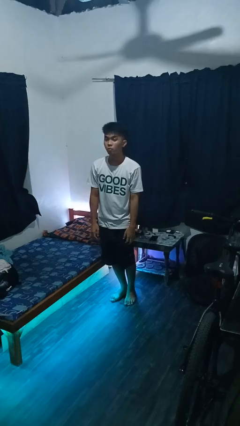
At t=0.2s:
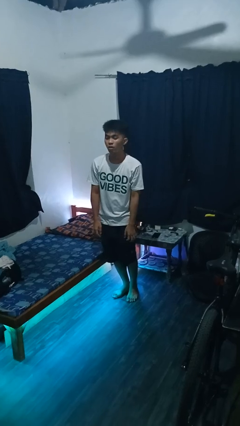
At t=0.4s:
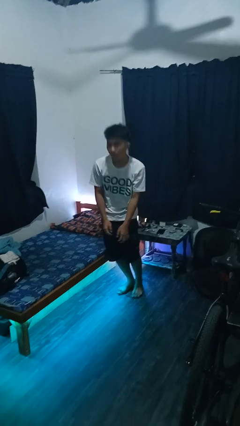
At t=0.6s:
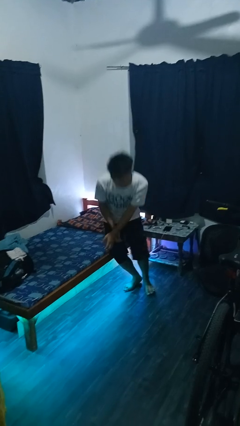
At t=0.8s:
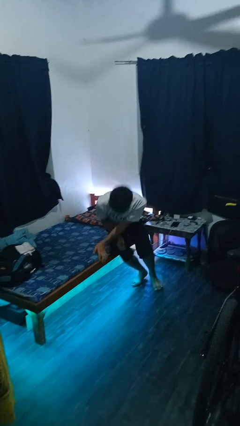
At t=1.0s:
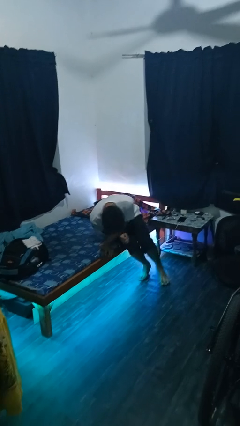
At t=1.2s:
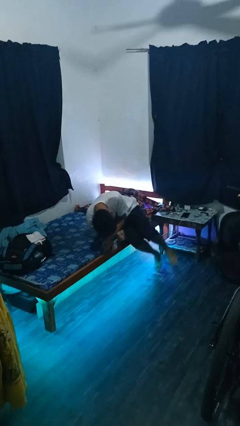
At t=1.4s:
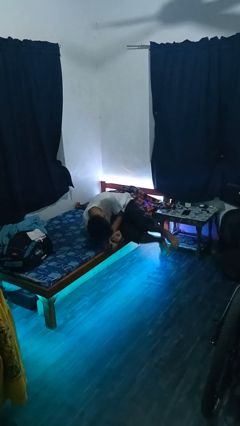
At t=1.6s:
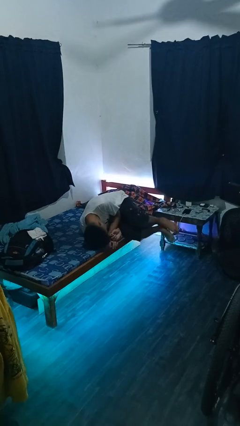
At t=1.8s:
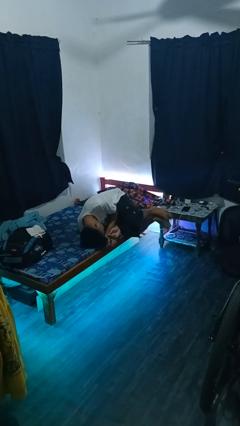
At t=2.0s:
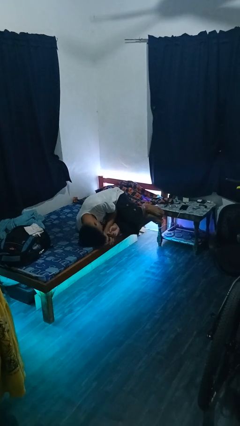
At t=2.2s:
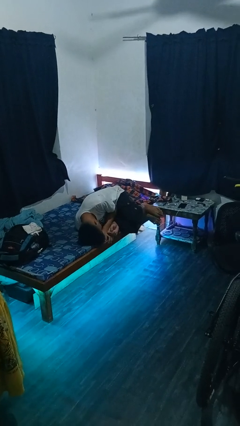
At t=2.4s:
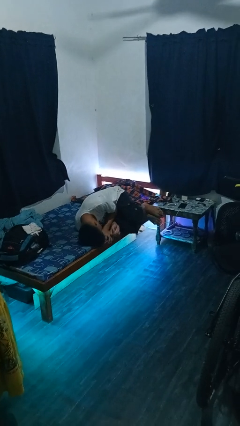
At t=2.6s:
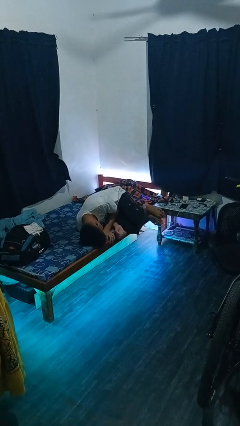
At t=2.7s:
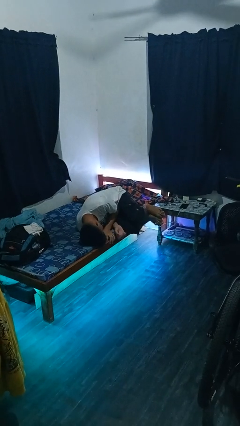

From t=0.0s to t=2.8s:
person lies down on bed

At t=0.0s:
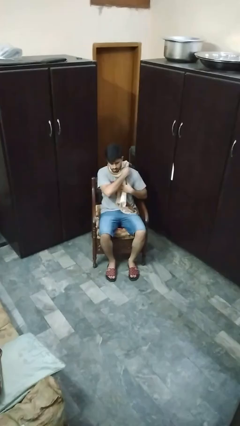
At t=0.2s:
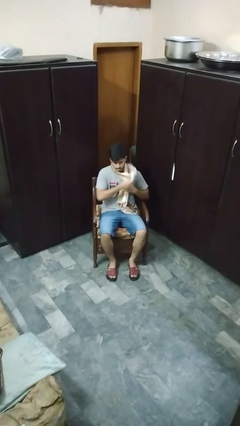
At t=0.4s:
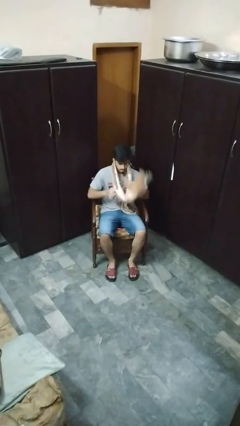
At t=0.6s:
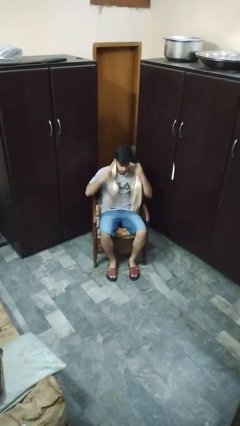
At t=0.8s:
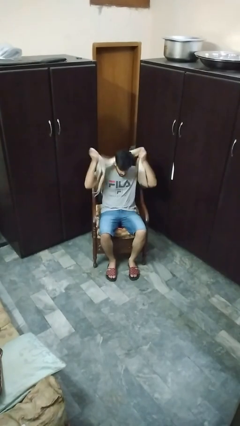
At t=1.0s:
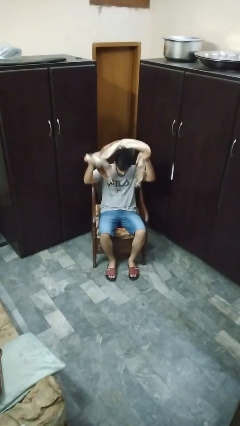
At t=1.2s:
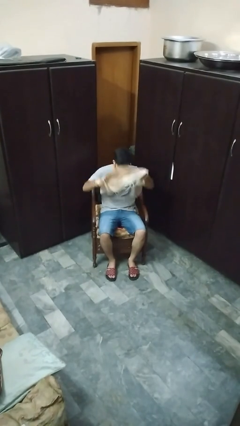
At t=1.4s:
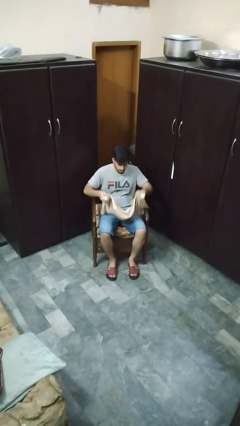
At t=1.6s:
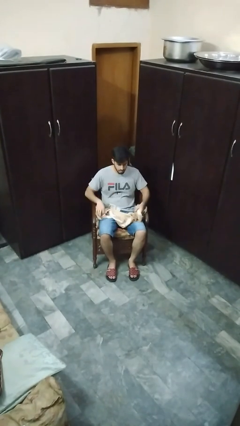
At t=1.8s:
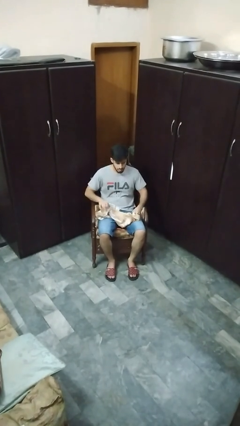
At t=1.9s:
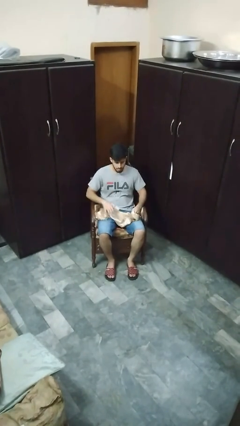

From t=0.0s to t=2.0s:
person takes off scarf

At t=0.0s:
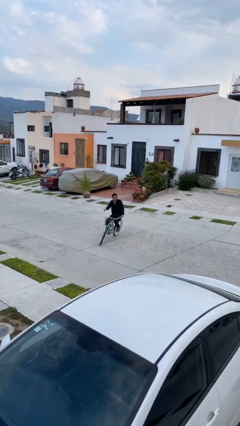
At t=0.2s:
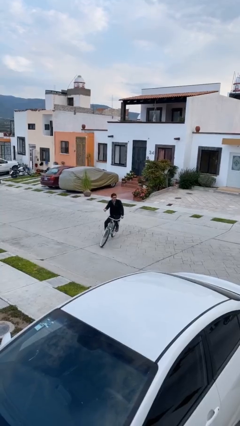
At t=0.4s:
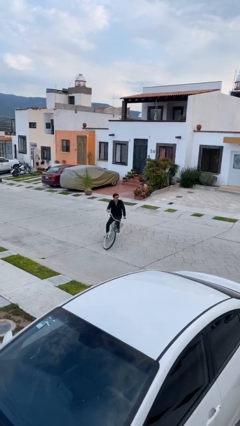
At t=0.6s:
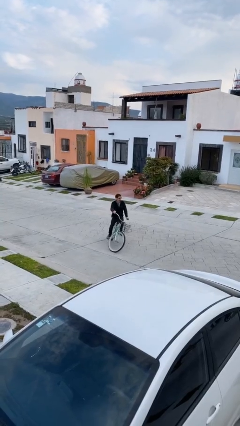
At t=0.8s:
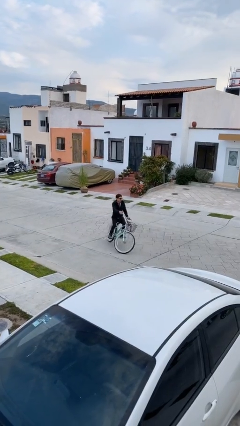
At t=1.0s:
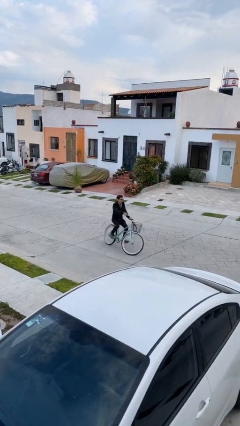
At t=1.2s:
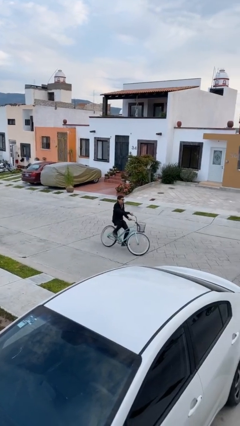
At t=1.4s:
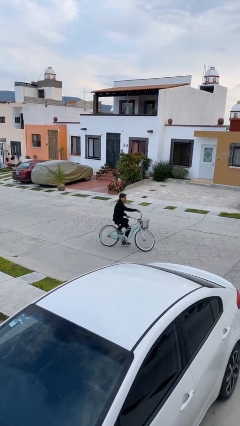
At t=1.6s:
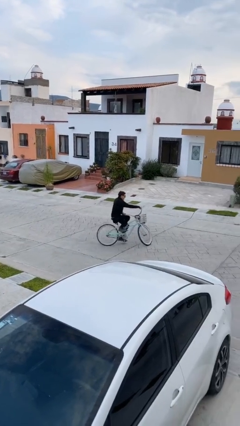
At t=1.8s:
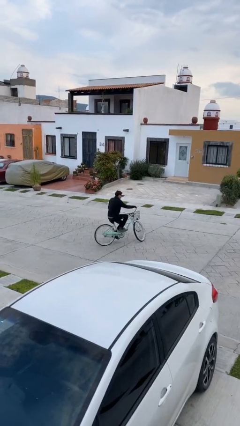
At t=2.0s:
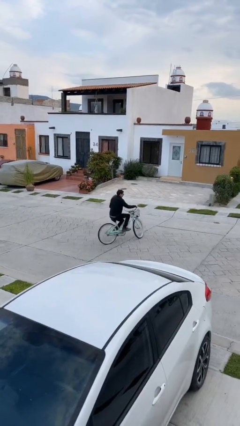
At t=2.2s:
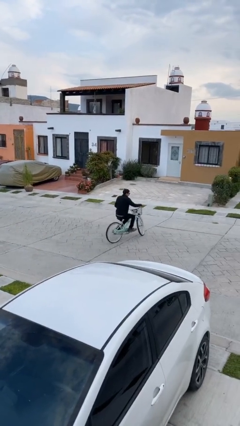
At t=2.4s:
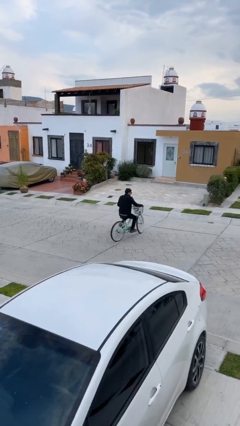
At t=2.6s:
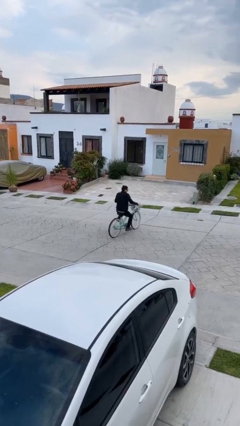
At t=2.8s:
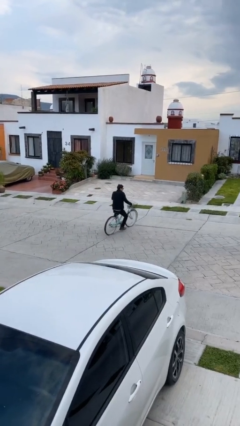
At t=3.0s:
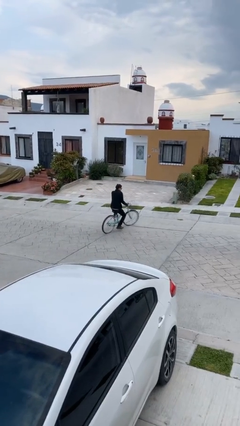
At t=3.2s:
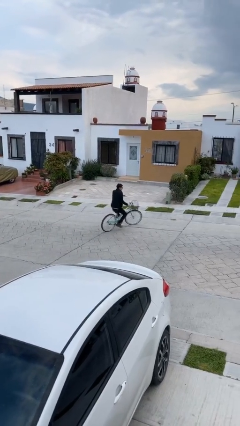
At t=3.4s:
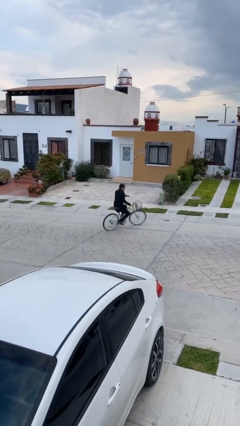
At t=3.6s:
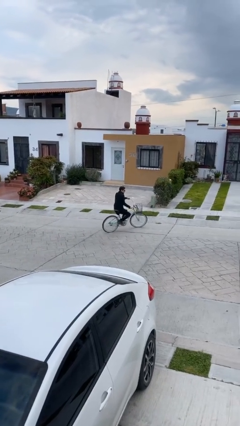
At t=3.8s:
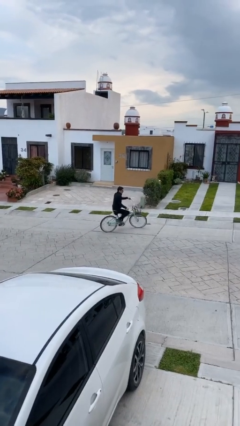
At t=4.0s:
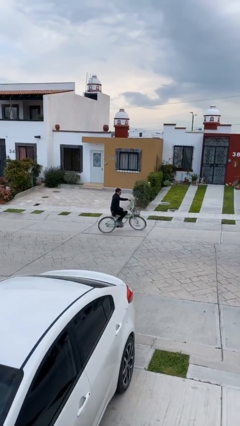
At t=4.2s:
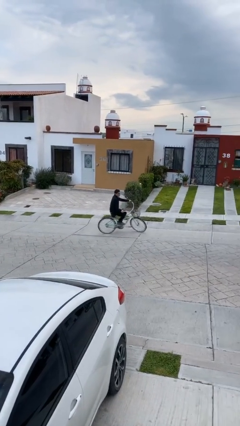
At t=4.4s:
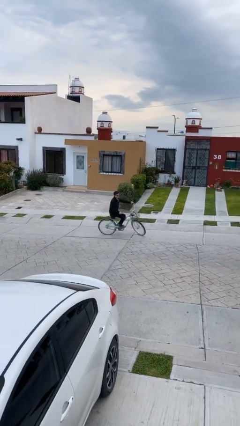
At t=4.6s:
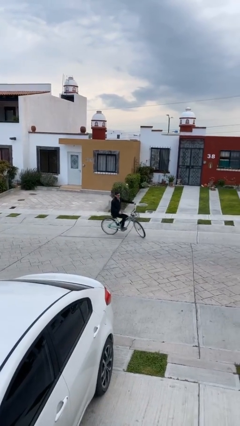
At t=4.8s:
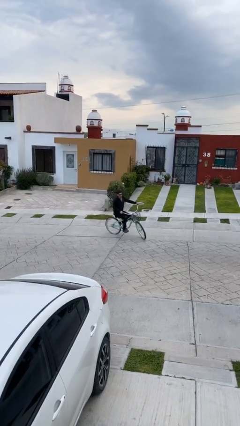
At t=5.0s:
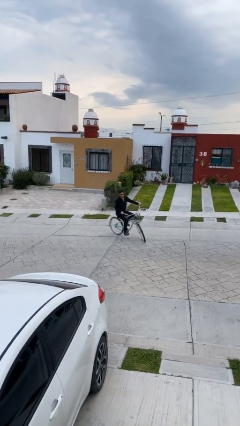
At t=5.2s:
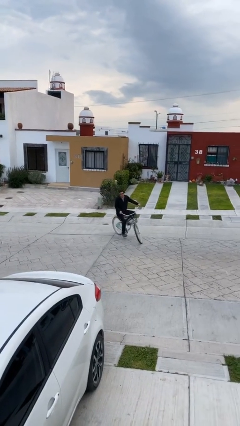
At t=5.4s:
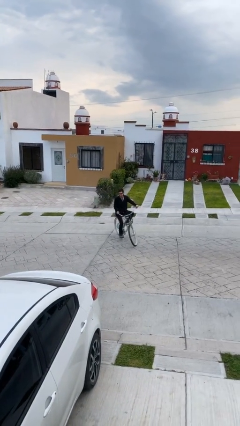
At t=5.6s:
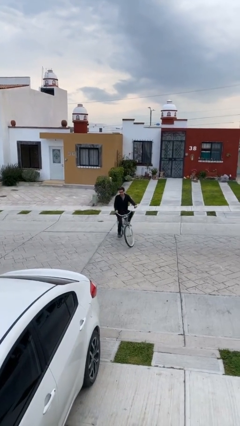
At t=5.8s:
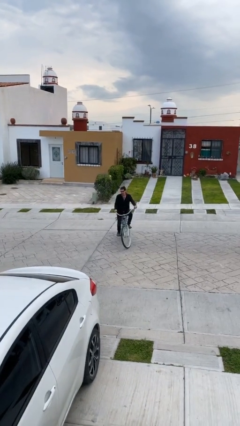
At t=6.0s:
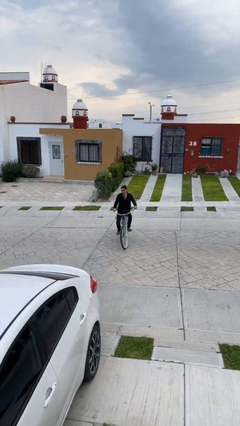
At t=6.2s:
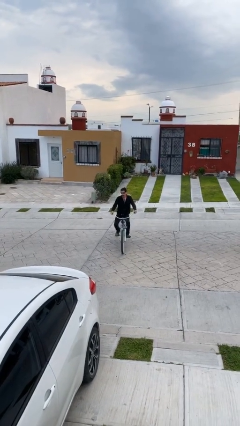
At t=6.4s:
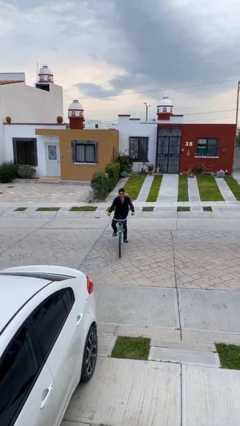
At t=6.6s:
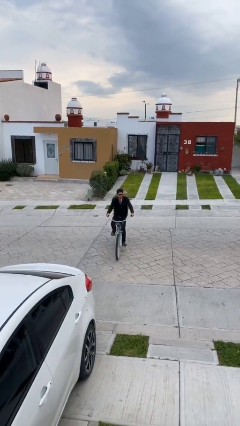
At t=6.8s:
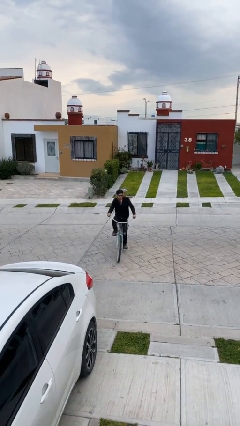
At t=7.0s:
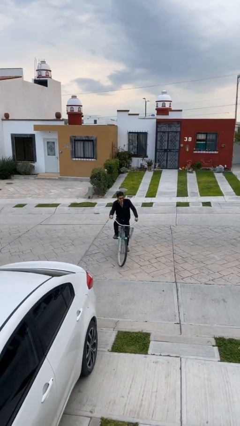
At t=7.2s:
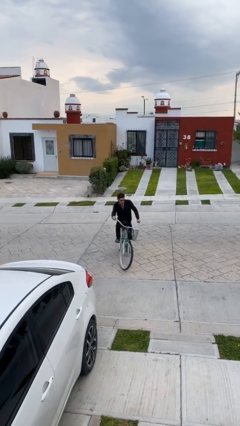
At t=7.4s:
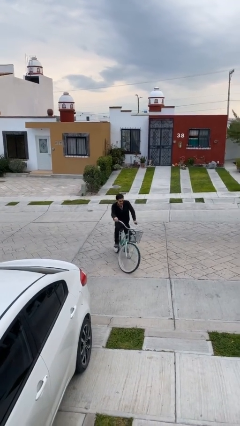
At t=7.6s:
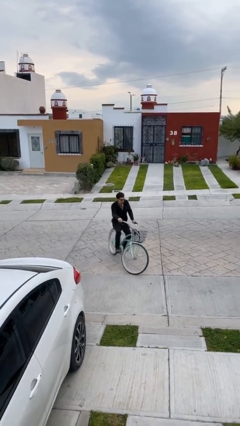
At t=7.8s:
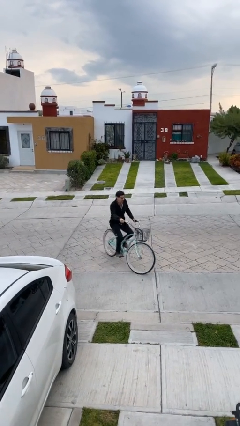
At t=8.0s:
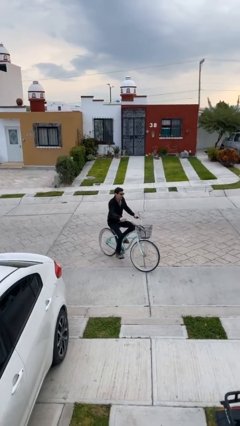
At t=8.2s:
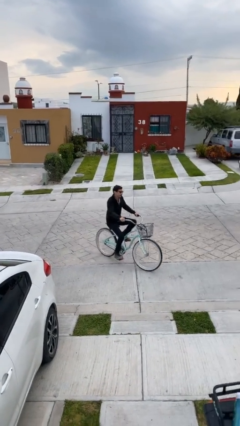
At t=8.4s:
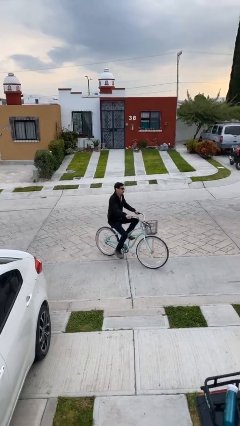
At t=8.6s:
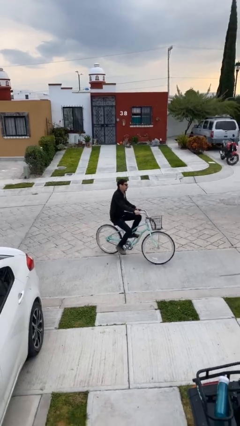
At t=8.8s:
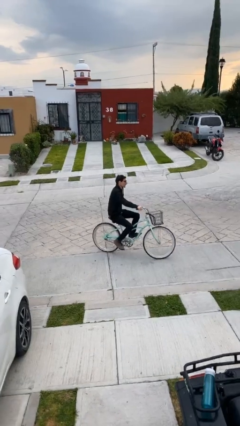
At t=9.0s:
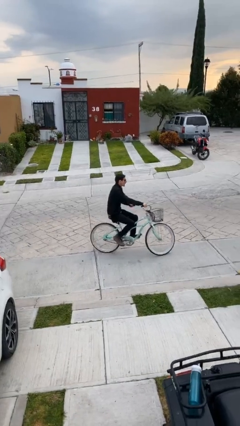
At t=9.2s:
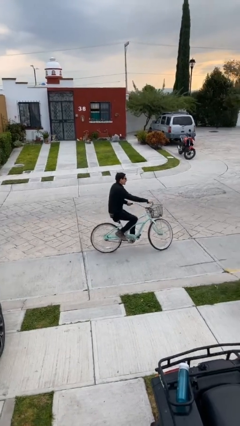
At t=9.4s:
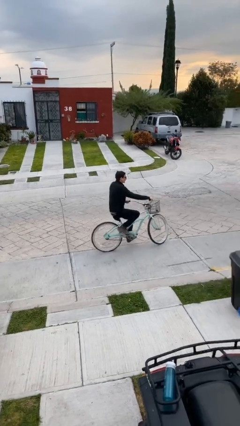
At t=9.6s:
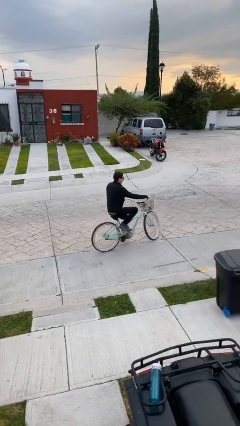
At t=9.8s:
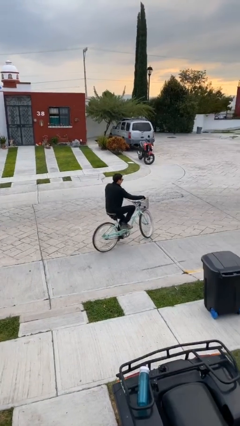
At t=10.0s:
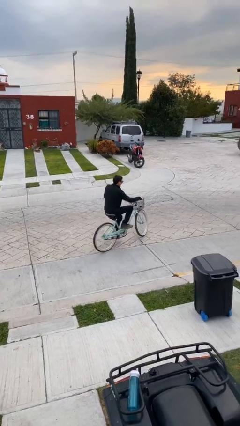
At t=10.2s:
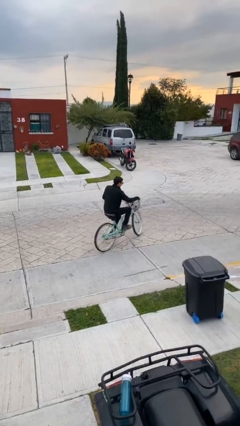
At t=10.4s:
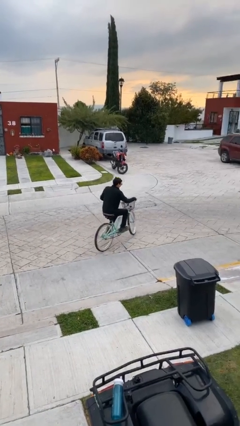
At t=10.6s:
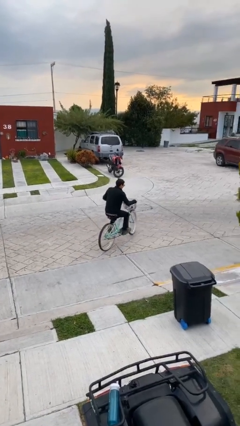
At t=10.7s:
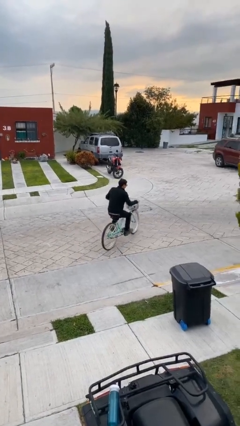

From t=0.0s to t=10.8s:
person rides bicycle

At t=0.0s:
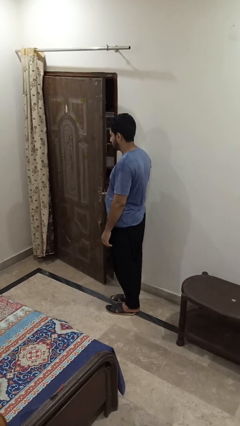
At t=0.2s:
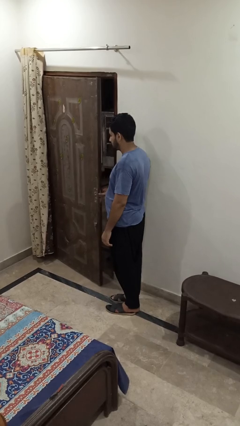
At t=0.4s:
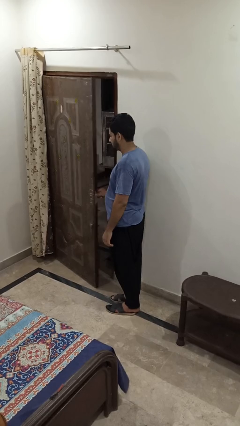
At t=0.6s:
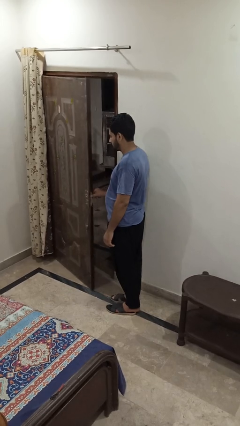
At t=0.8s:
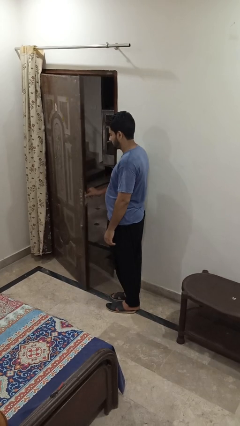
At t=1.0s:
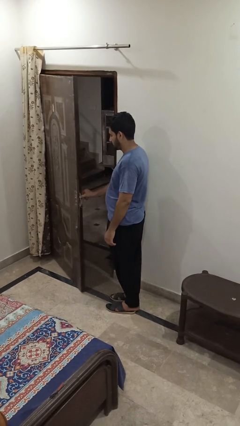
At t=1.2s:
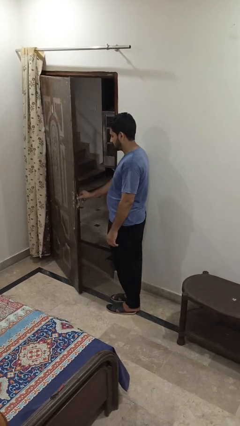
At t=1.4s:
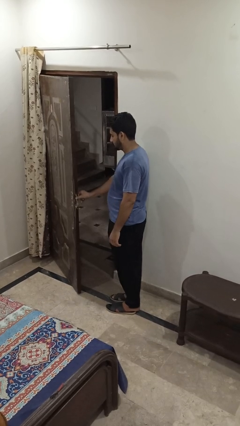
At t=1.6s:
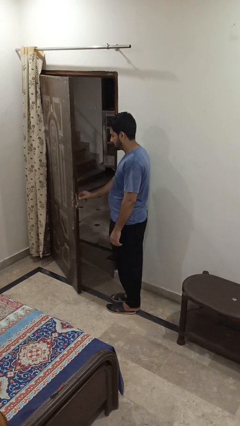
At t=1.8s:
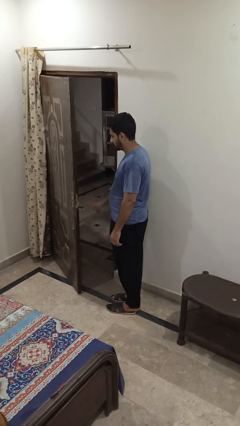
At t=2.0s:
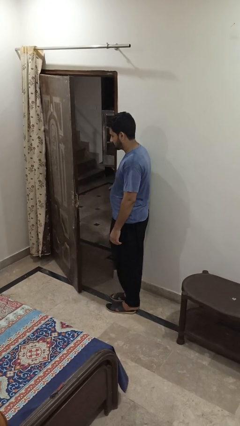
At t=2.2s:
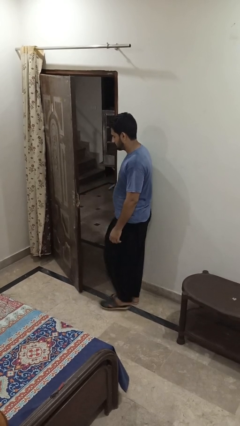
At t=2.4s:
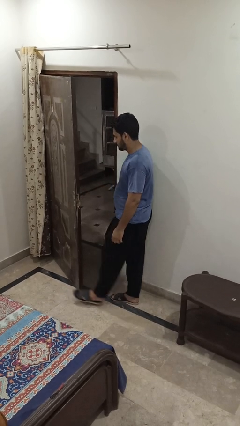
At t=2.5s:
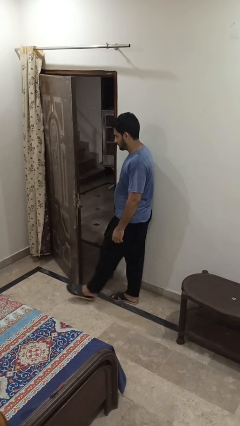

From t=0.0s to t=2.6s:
person opens facility door
